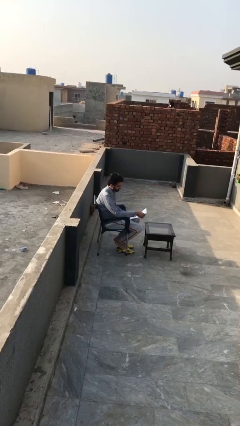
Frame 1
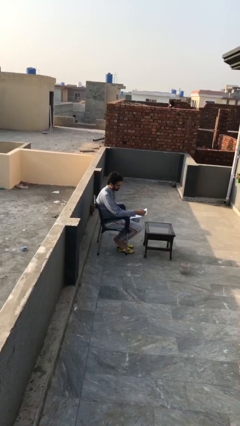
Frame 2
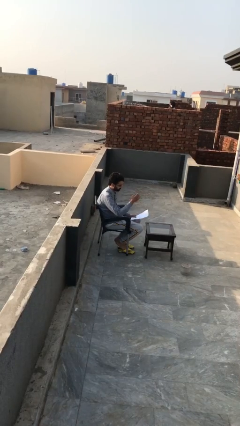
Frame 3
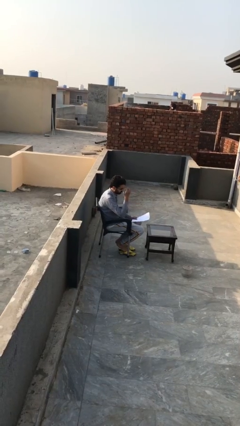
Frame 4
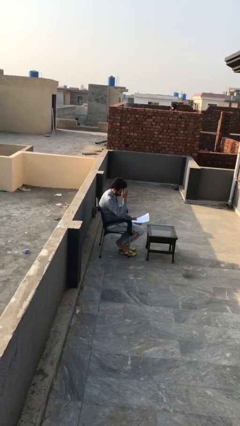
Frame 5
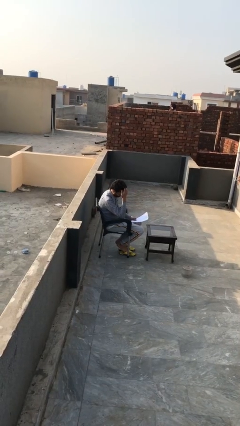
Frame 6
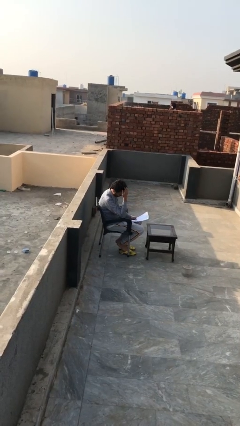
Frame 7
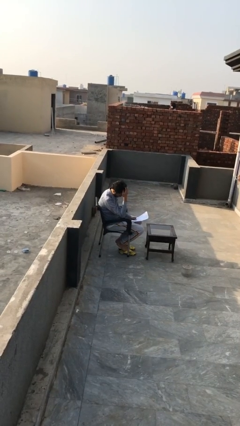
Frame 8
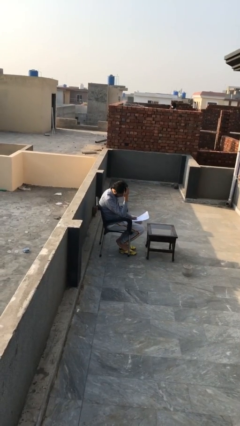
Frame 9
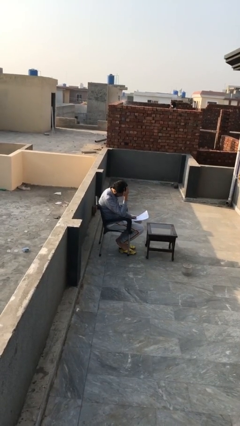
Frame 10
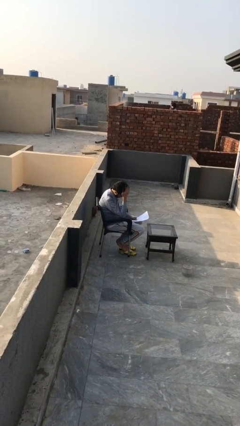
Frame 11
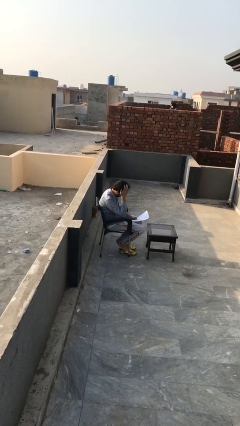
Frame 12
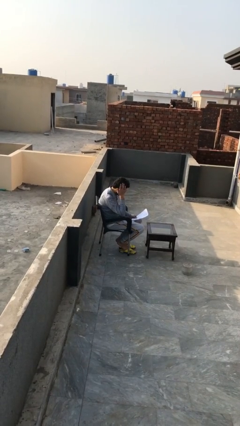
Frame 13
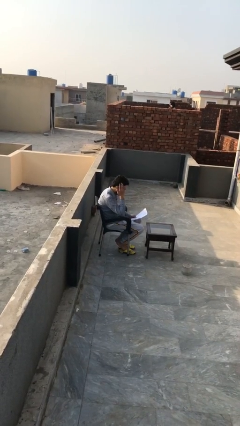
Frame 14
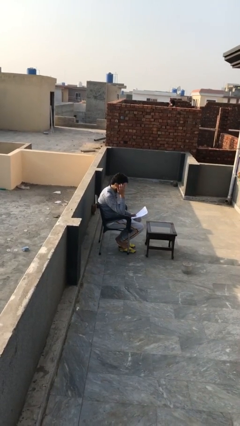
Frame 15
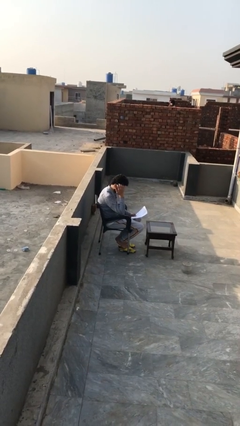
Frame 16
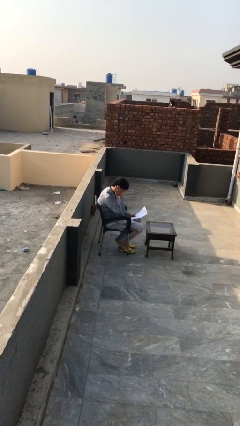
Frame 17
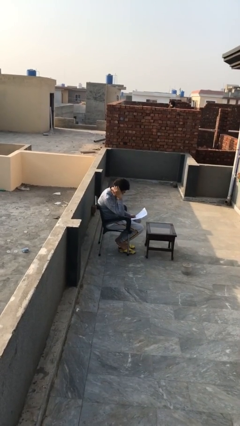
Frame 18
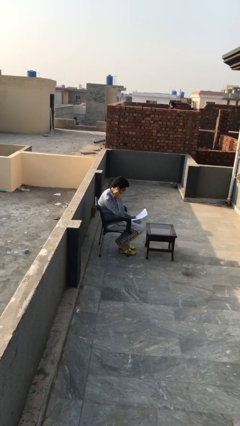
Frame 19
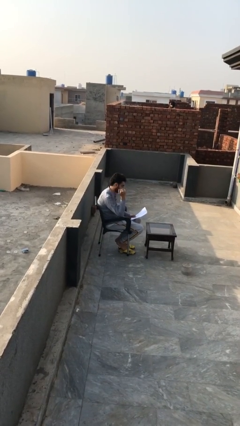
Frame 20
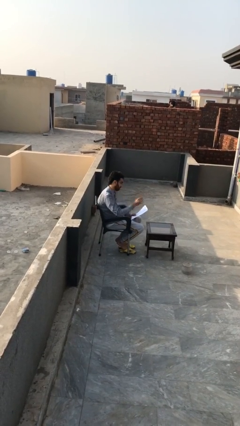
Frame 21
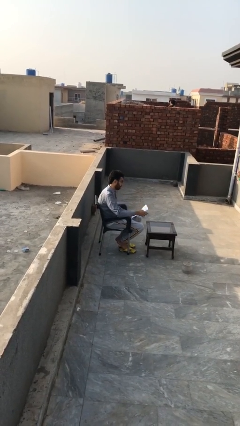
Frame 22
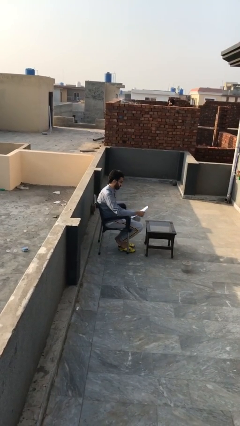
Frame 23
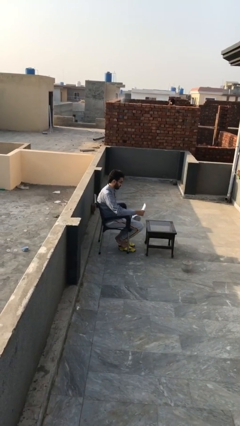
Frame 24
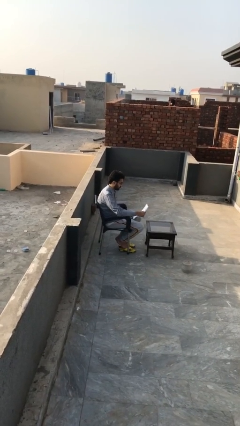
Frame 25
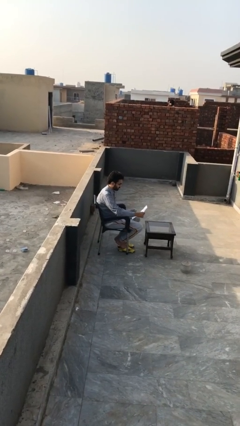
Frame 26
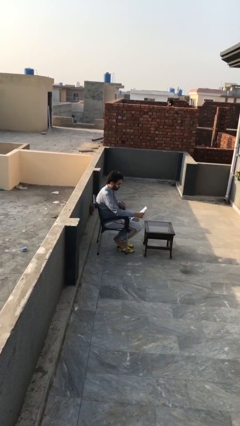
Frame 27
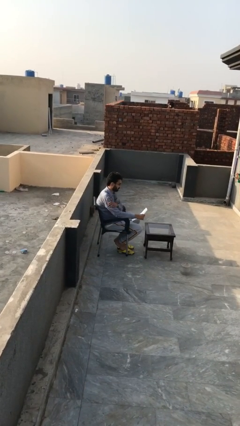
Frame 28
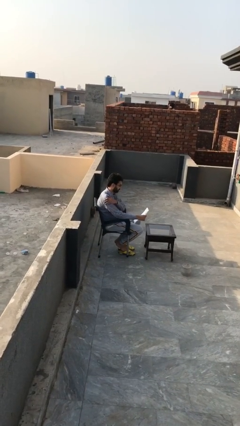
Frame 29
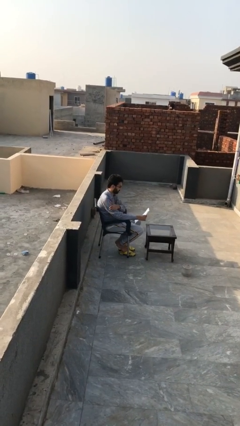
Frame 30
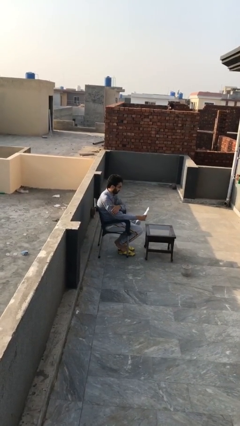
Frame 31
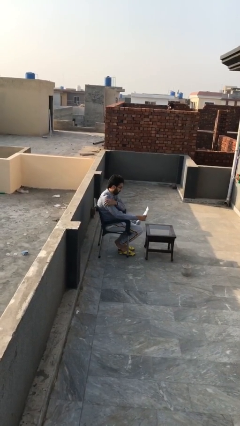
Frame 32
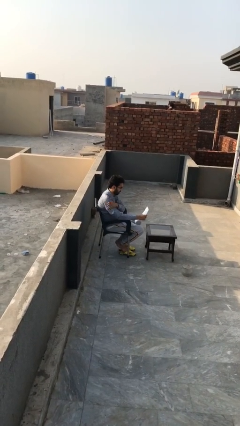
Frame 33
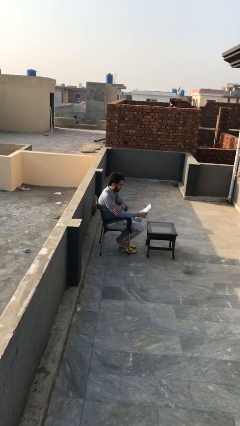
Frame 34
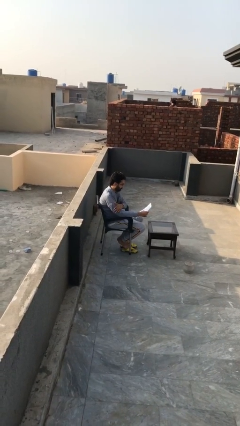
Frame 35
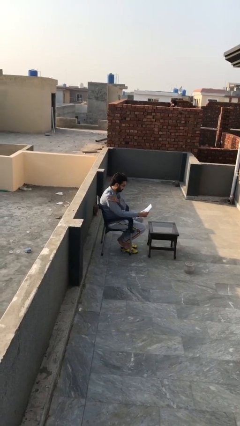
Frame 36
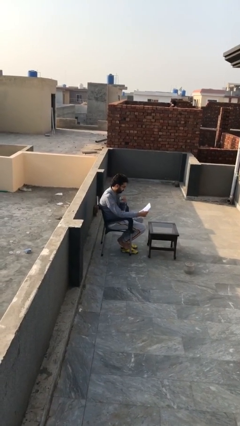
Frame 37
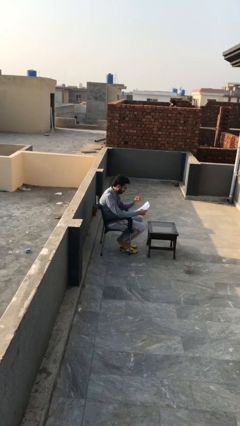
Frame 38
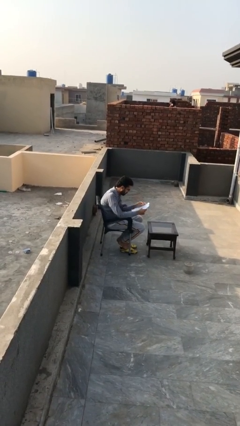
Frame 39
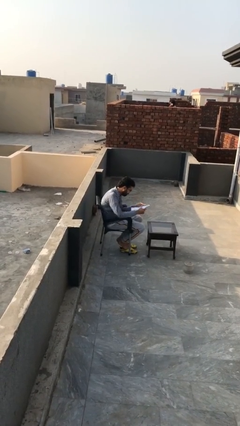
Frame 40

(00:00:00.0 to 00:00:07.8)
person reads document

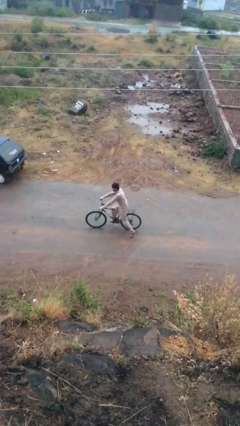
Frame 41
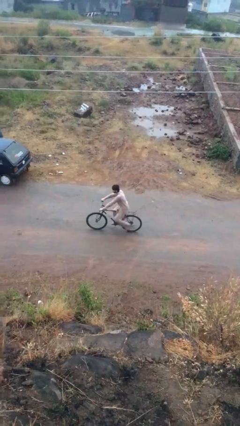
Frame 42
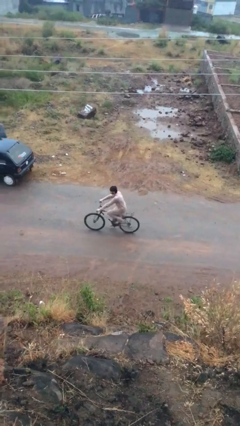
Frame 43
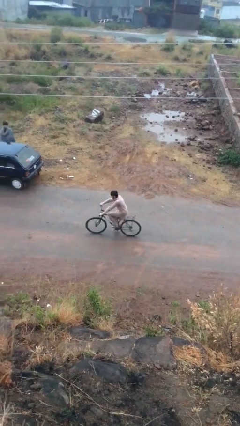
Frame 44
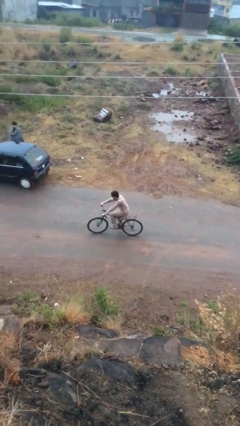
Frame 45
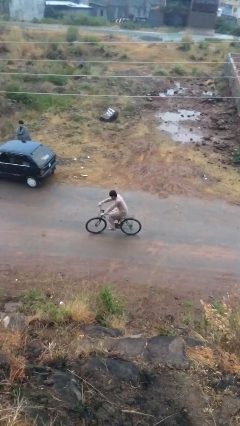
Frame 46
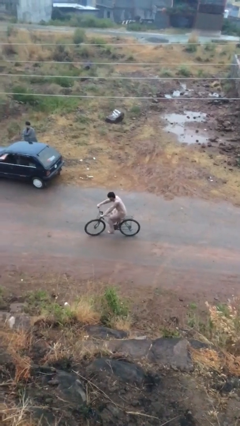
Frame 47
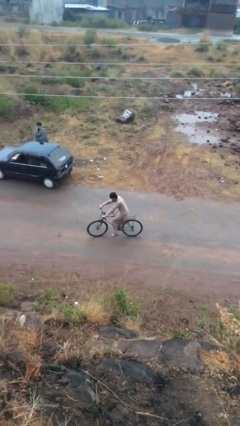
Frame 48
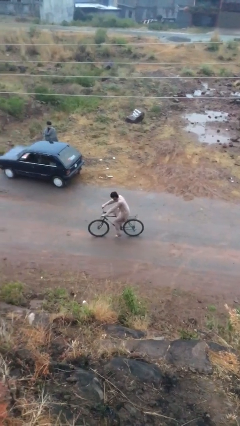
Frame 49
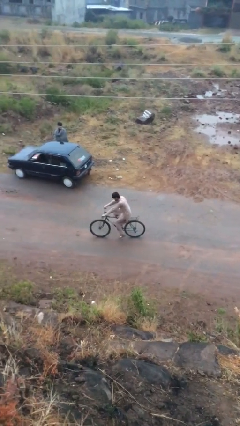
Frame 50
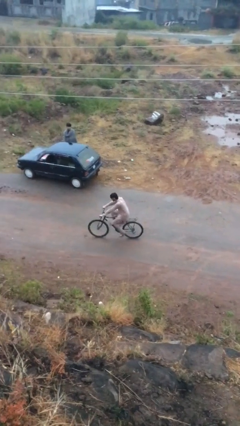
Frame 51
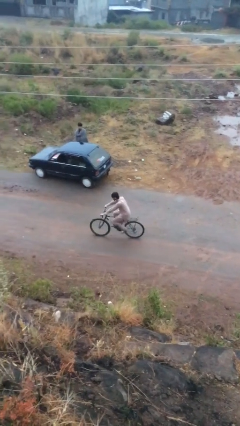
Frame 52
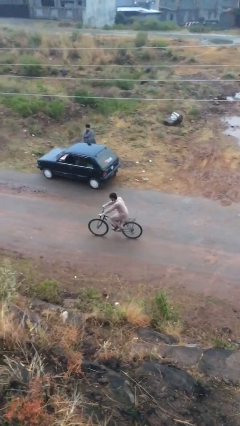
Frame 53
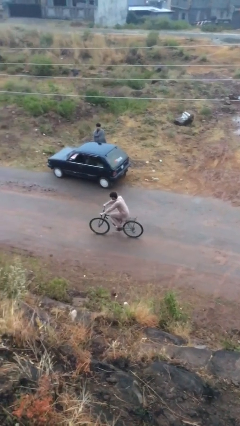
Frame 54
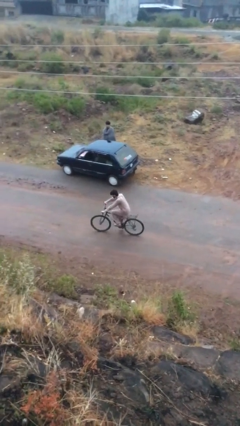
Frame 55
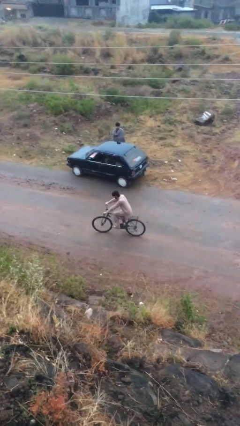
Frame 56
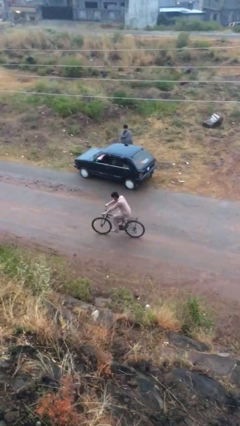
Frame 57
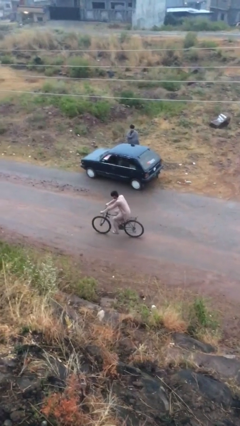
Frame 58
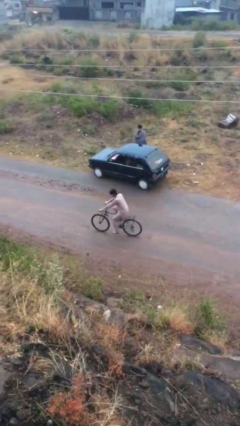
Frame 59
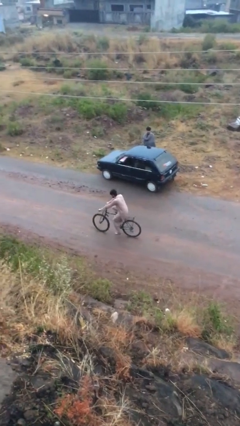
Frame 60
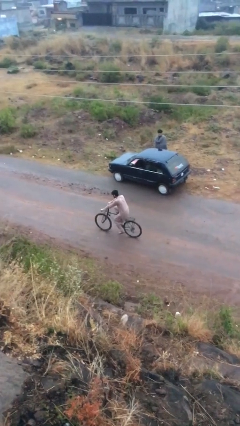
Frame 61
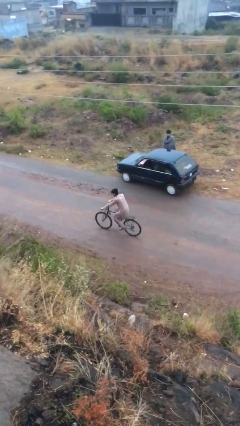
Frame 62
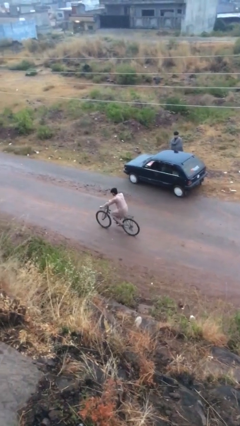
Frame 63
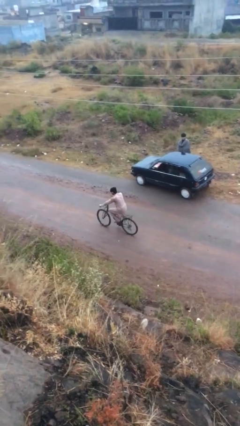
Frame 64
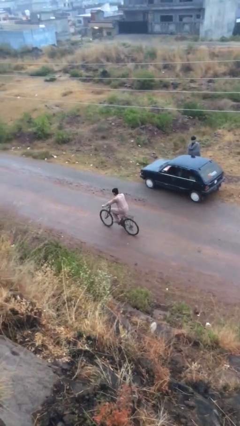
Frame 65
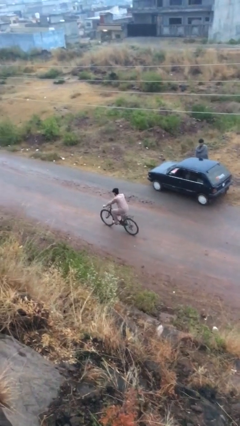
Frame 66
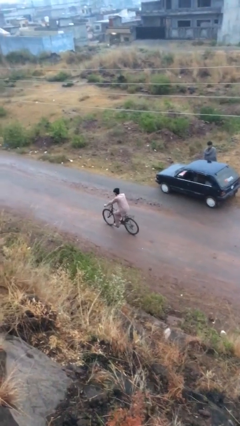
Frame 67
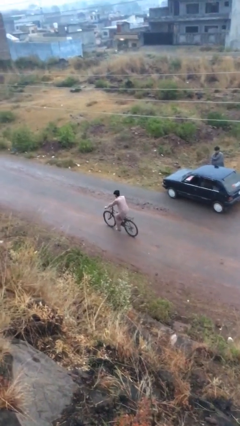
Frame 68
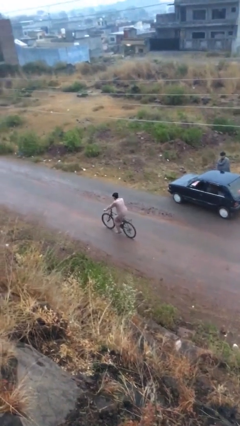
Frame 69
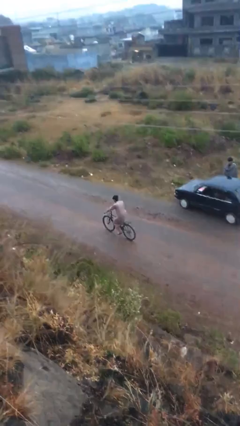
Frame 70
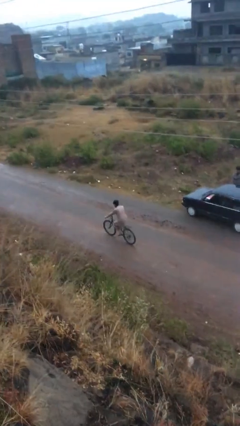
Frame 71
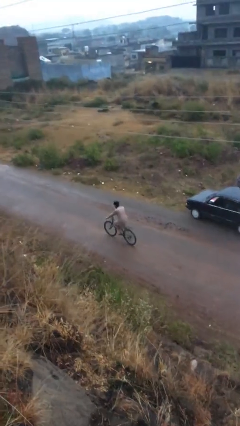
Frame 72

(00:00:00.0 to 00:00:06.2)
person rides bicycle

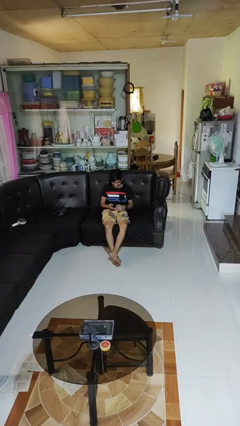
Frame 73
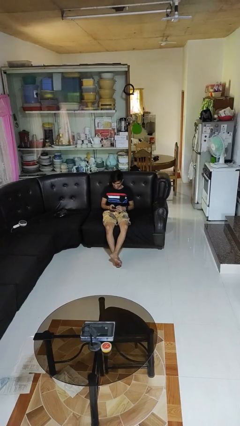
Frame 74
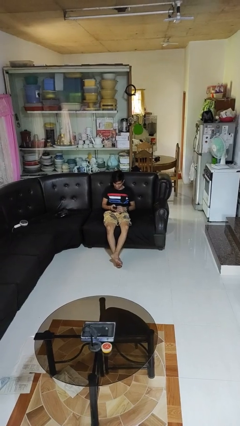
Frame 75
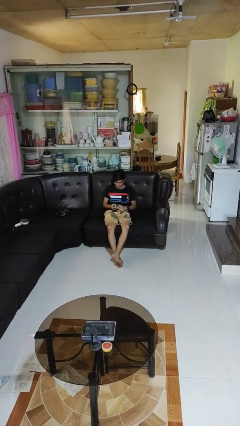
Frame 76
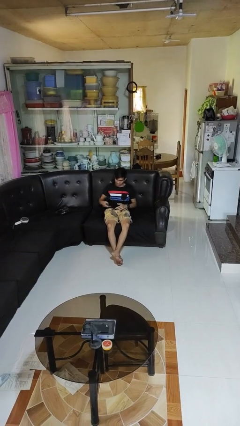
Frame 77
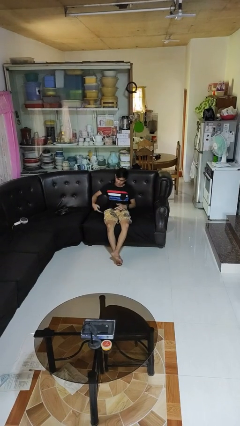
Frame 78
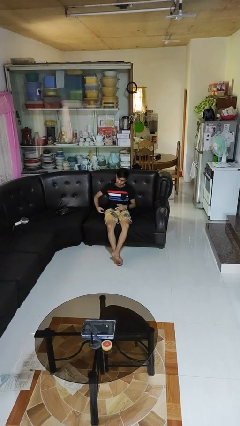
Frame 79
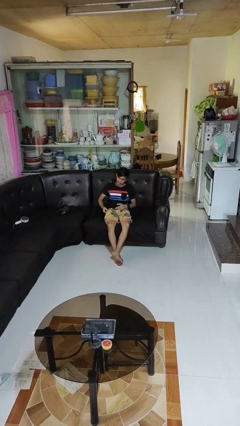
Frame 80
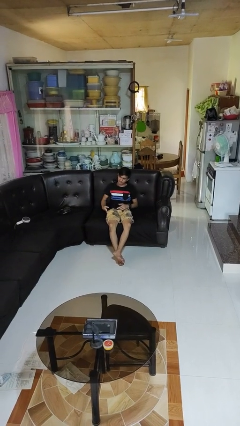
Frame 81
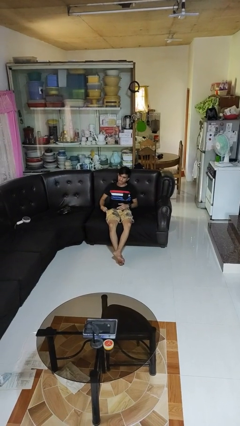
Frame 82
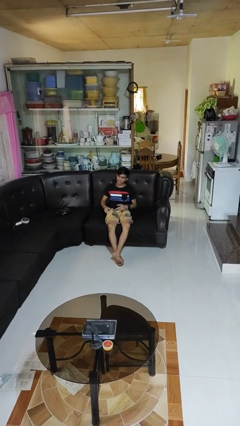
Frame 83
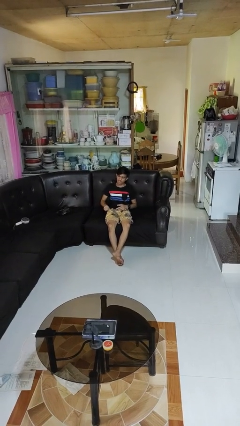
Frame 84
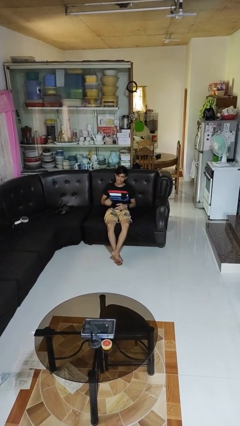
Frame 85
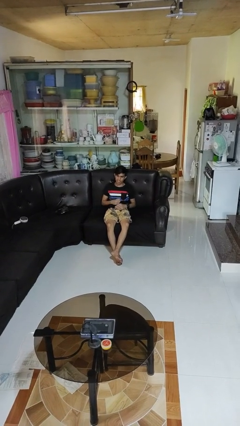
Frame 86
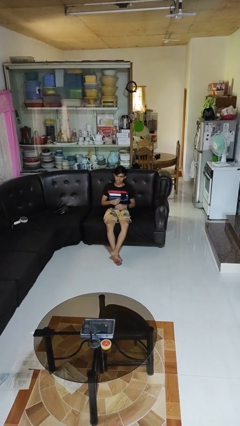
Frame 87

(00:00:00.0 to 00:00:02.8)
person puts phone into pocket

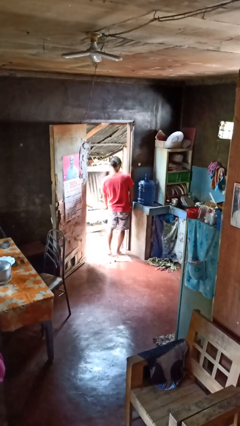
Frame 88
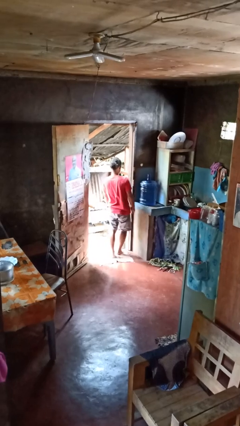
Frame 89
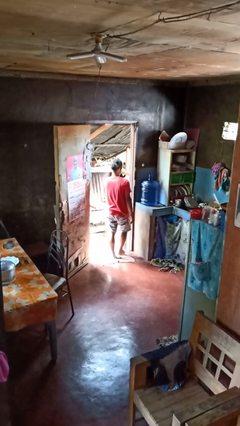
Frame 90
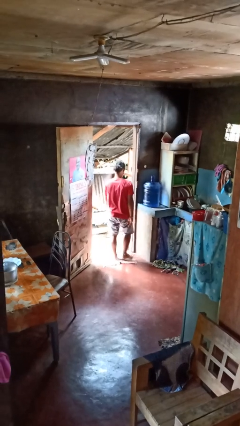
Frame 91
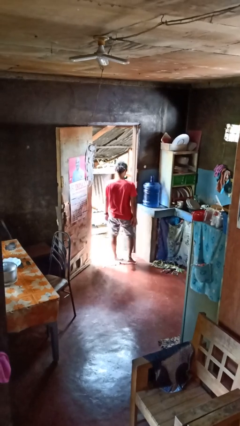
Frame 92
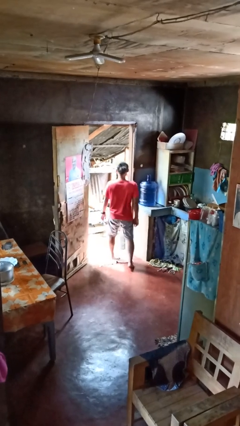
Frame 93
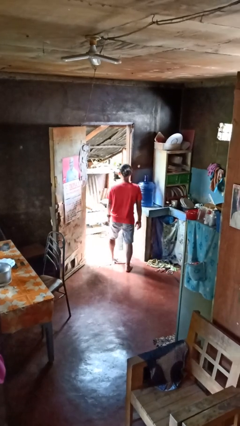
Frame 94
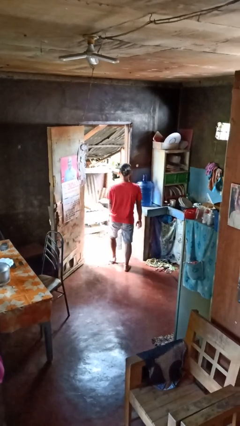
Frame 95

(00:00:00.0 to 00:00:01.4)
person bumps into wall
